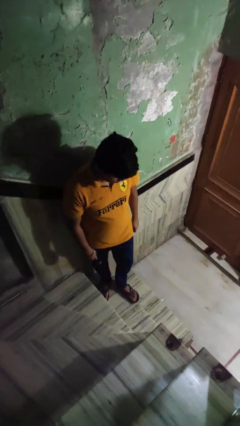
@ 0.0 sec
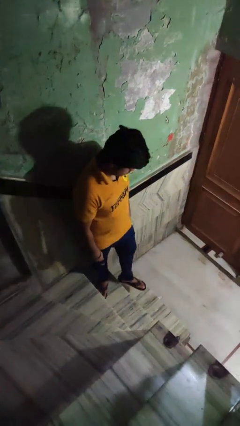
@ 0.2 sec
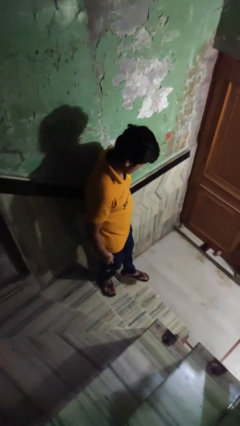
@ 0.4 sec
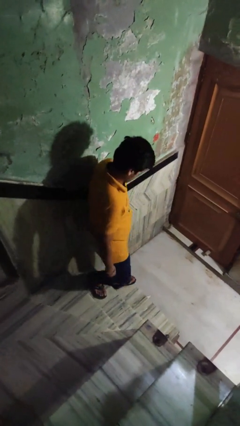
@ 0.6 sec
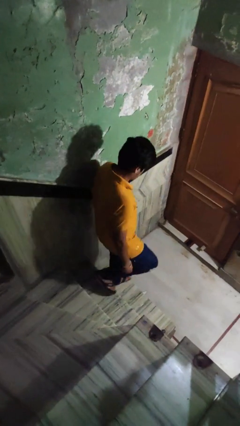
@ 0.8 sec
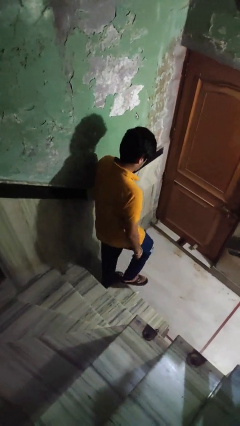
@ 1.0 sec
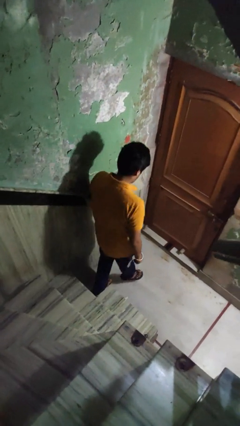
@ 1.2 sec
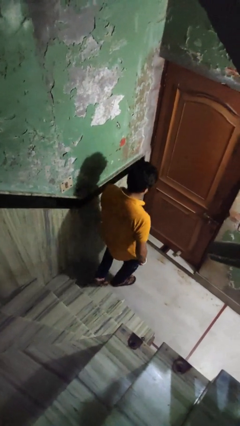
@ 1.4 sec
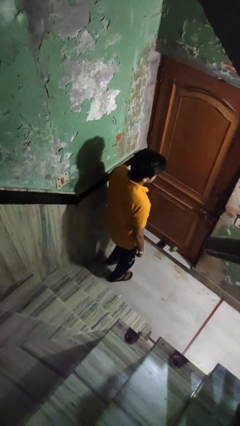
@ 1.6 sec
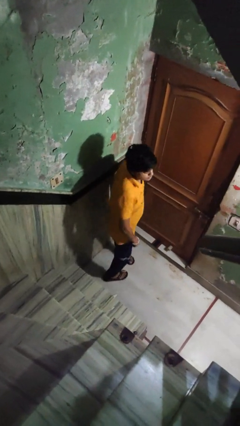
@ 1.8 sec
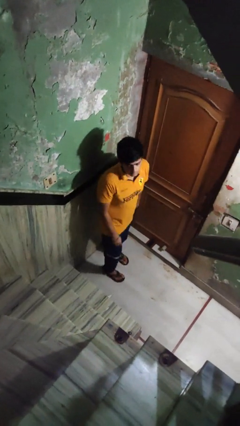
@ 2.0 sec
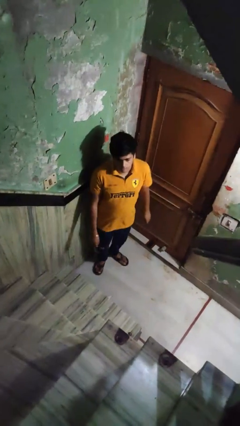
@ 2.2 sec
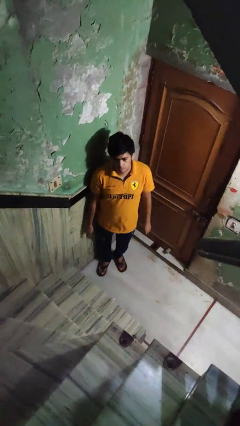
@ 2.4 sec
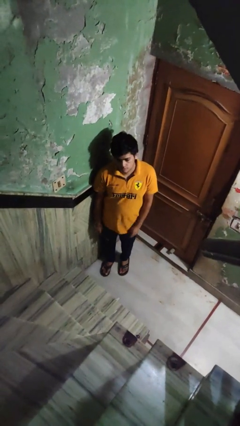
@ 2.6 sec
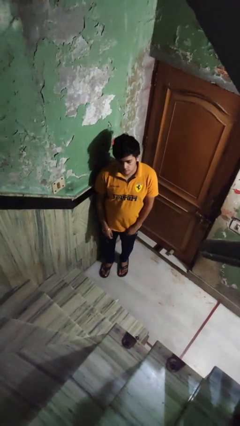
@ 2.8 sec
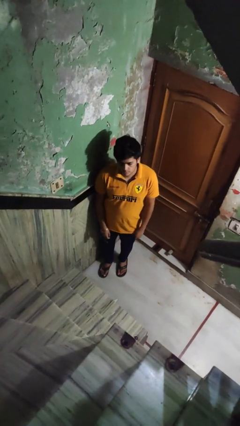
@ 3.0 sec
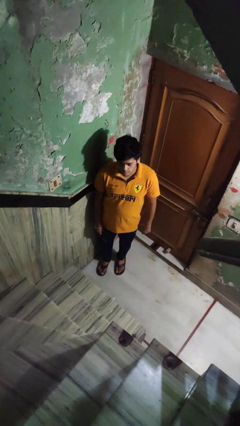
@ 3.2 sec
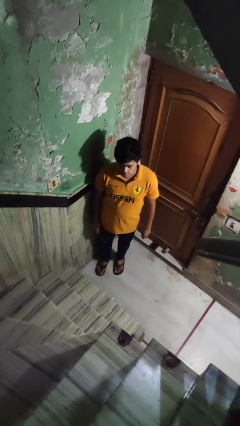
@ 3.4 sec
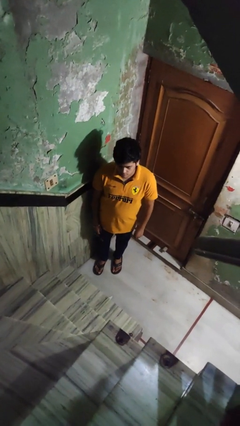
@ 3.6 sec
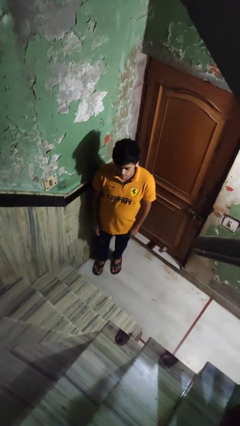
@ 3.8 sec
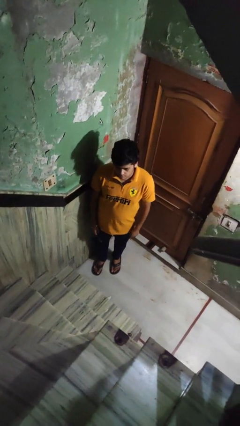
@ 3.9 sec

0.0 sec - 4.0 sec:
person climbs down stairs

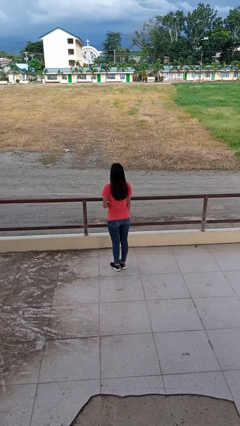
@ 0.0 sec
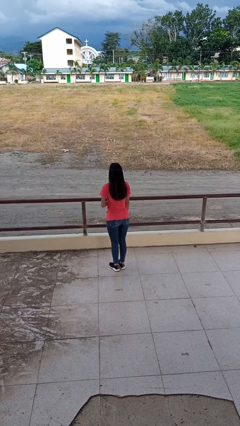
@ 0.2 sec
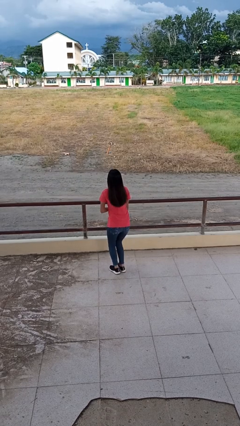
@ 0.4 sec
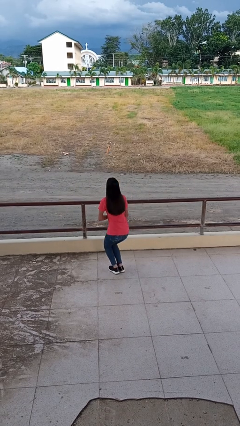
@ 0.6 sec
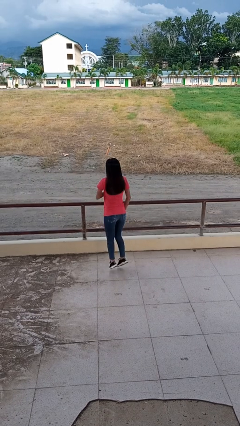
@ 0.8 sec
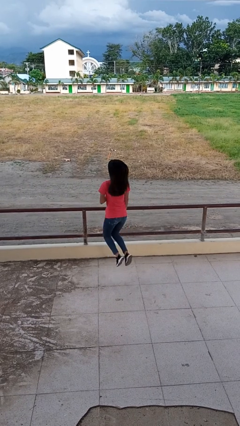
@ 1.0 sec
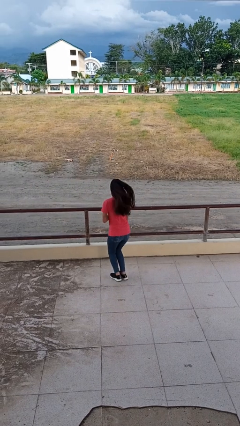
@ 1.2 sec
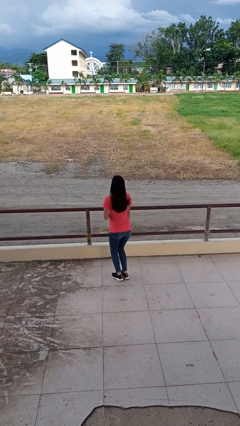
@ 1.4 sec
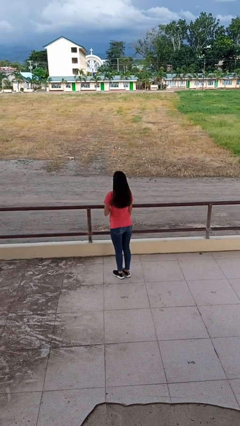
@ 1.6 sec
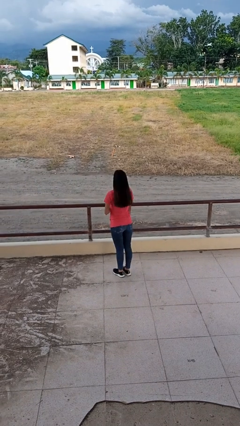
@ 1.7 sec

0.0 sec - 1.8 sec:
person jumps

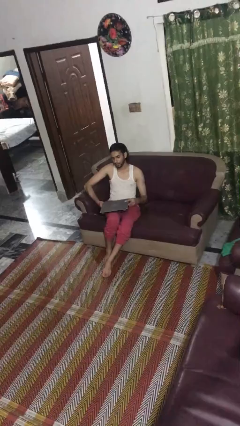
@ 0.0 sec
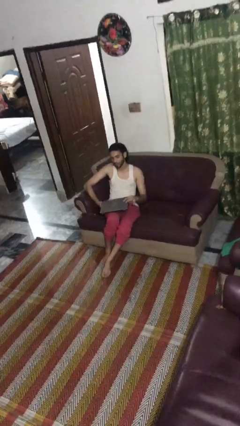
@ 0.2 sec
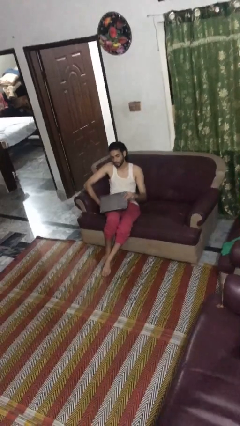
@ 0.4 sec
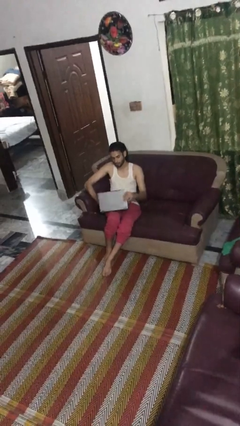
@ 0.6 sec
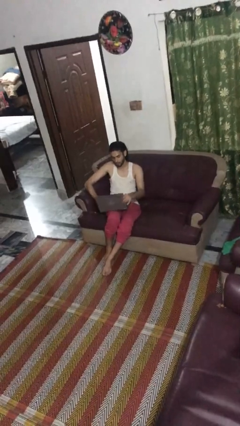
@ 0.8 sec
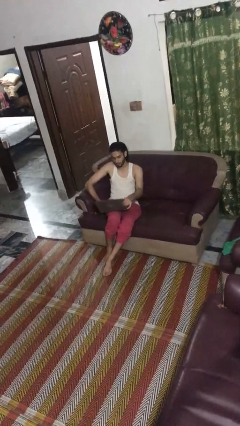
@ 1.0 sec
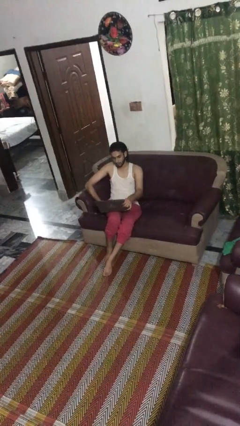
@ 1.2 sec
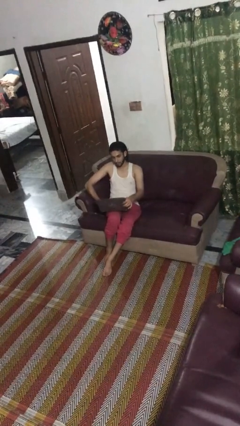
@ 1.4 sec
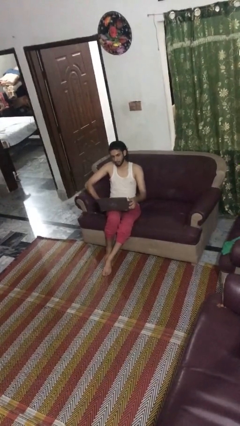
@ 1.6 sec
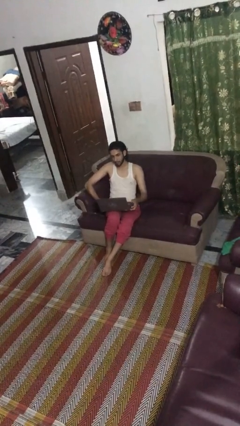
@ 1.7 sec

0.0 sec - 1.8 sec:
person opens laptop

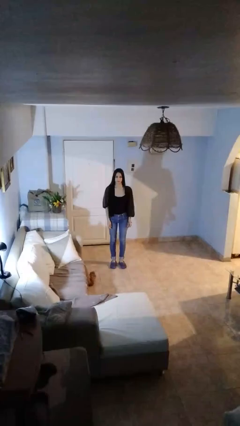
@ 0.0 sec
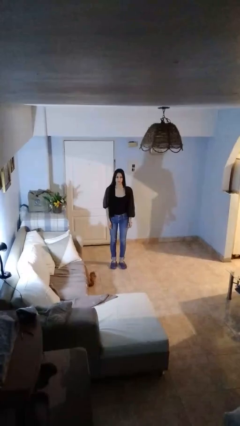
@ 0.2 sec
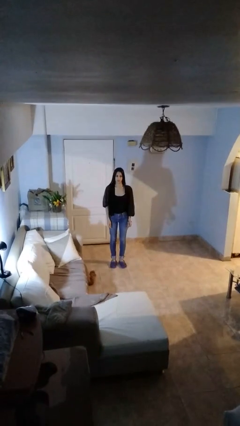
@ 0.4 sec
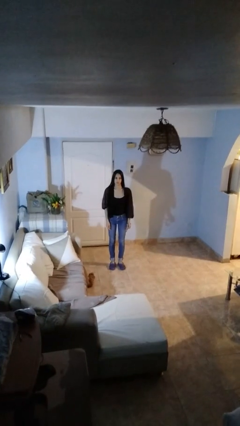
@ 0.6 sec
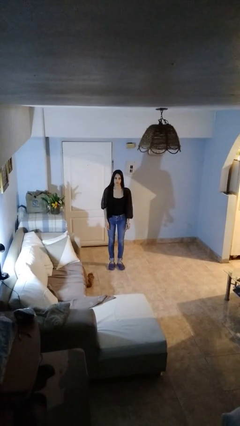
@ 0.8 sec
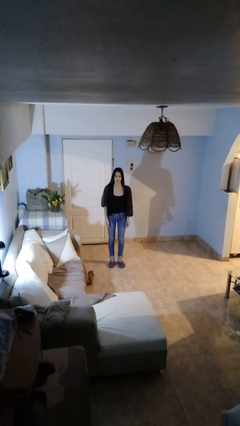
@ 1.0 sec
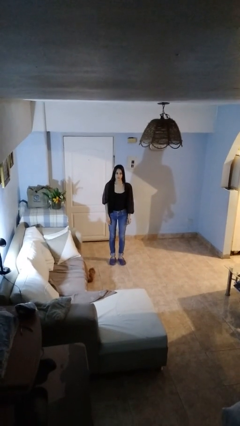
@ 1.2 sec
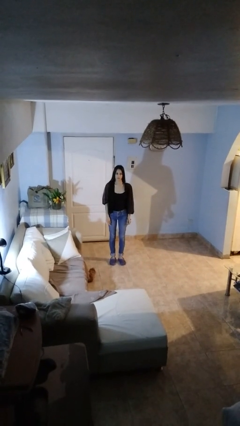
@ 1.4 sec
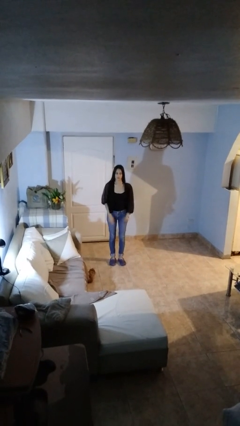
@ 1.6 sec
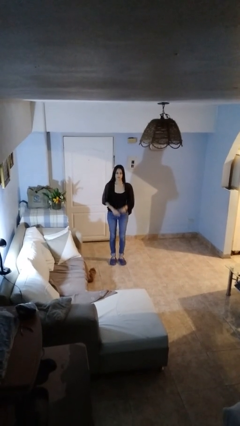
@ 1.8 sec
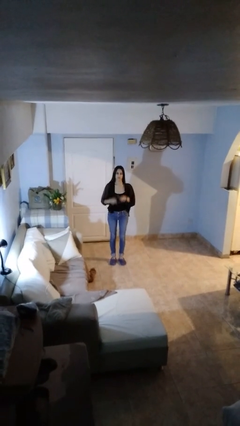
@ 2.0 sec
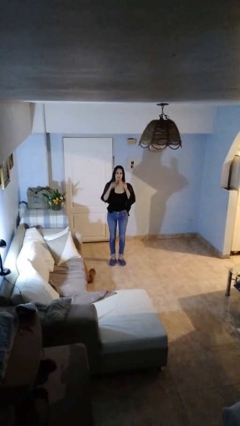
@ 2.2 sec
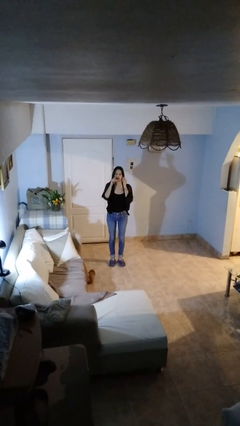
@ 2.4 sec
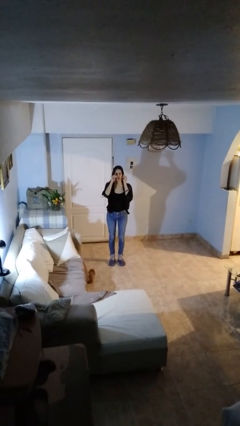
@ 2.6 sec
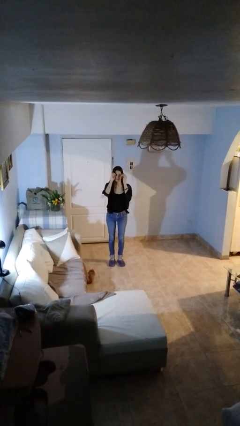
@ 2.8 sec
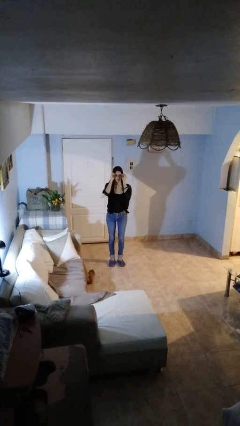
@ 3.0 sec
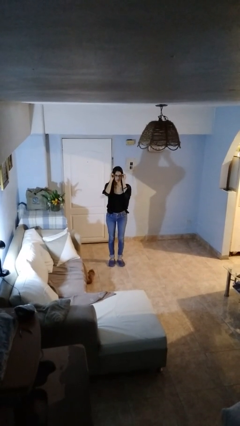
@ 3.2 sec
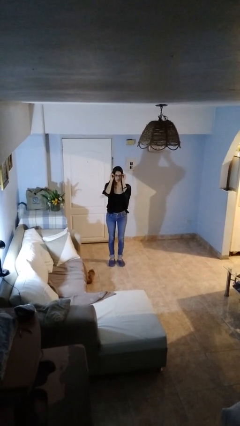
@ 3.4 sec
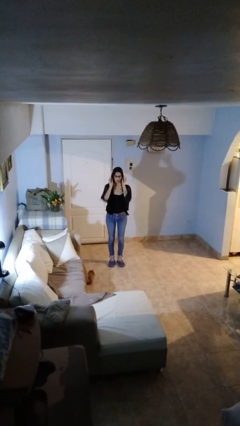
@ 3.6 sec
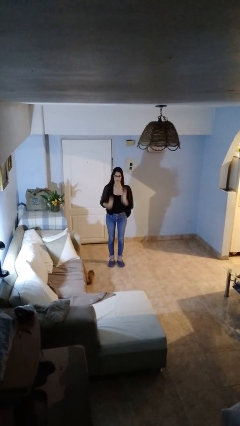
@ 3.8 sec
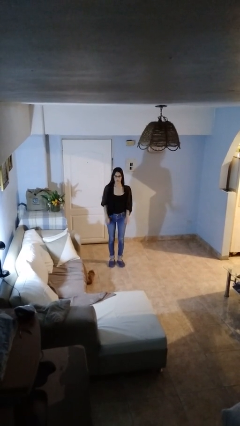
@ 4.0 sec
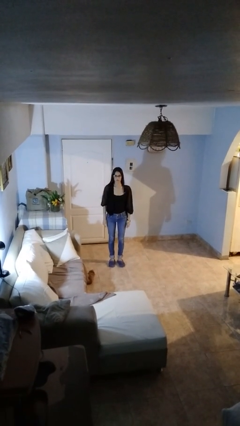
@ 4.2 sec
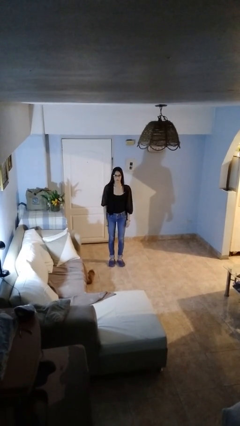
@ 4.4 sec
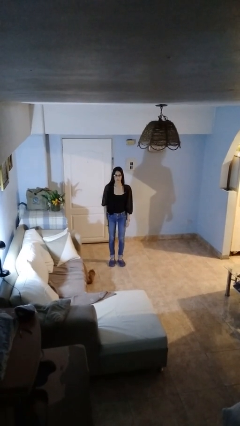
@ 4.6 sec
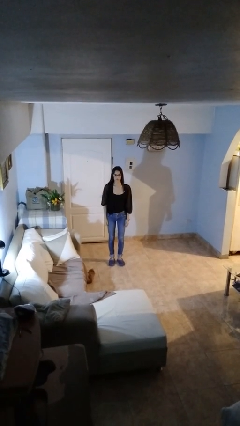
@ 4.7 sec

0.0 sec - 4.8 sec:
person puts on glasses

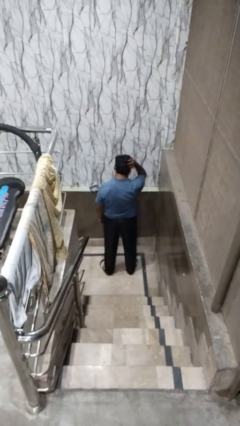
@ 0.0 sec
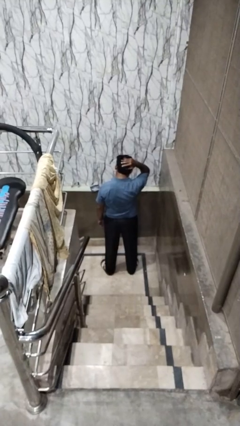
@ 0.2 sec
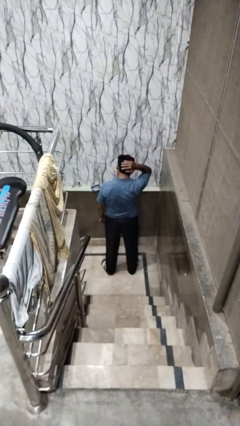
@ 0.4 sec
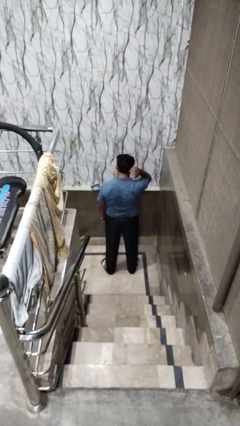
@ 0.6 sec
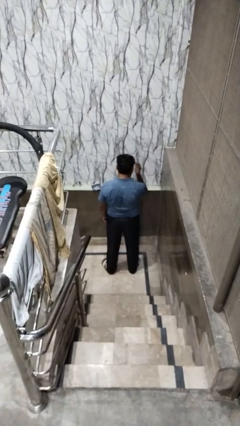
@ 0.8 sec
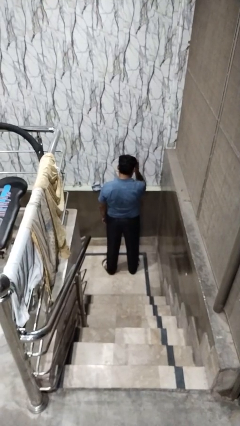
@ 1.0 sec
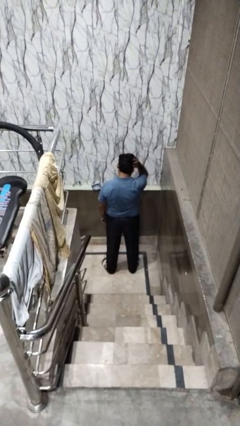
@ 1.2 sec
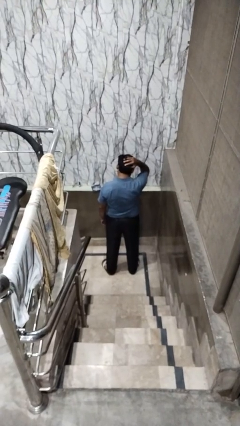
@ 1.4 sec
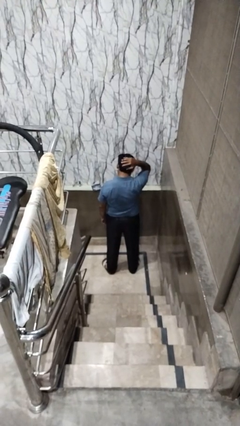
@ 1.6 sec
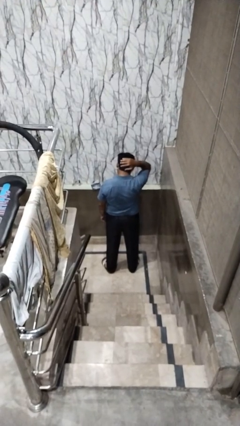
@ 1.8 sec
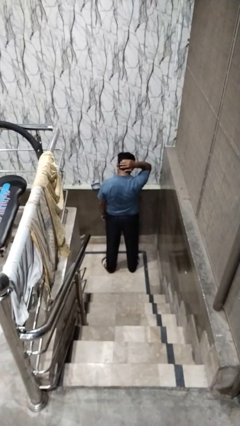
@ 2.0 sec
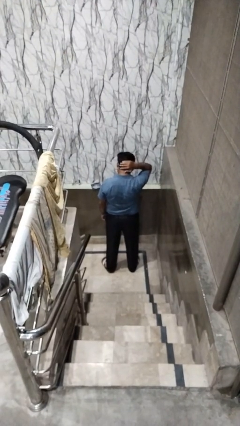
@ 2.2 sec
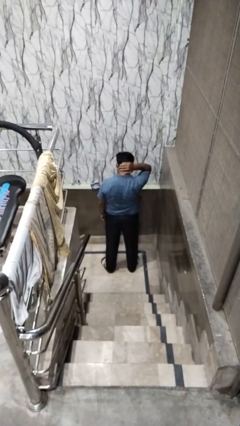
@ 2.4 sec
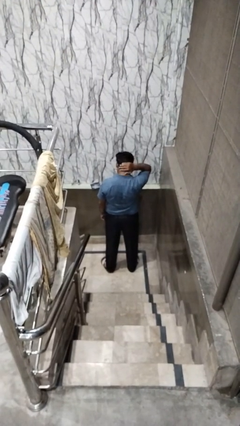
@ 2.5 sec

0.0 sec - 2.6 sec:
person strokes hair

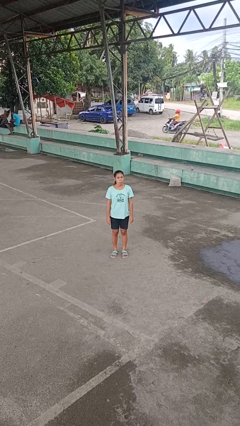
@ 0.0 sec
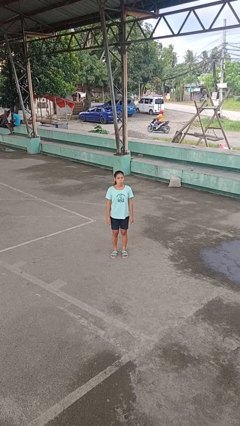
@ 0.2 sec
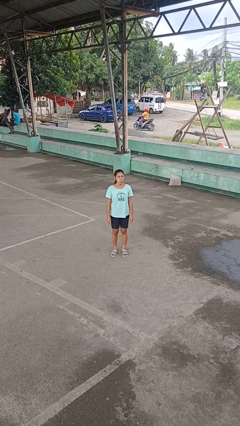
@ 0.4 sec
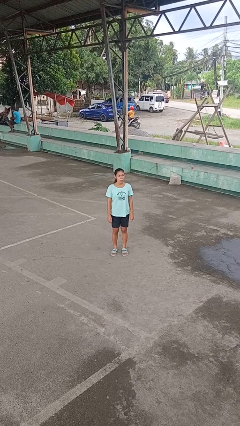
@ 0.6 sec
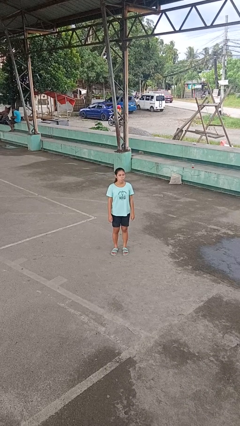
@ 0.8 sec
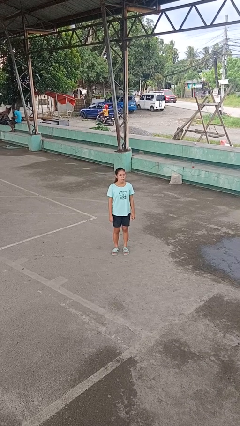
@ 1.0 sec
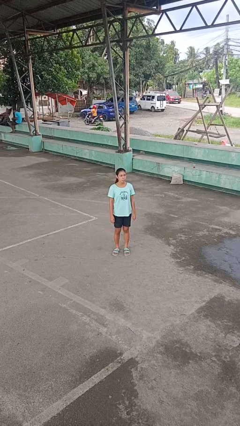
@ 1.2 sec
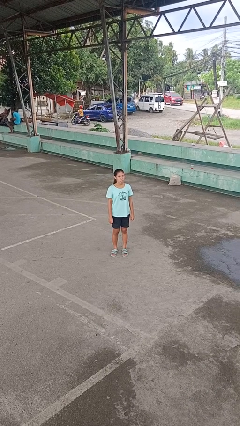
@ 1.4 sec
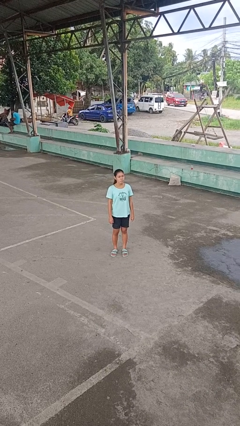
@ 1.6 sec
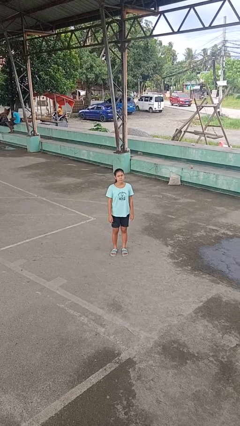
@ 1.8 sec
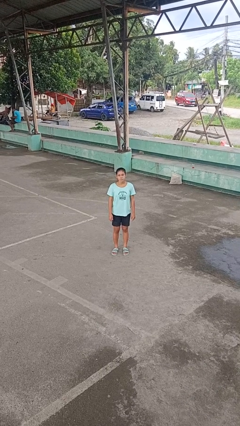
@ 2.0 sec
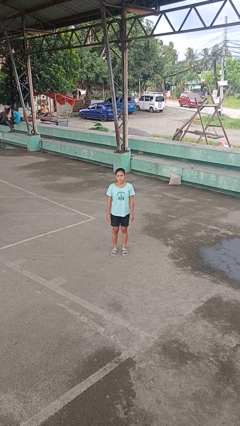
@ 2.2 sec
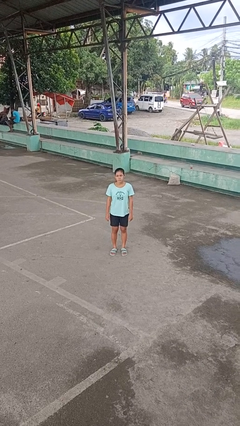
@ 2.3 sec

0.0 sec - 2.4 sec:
person sticks out tongue
